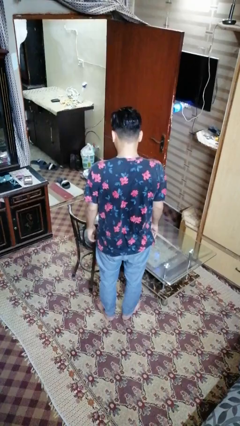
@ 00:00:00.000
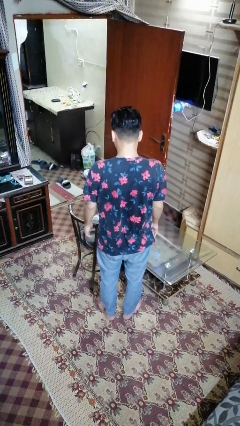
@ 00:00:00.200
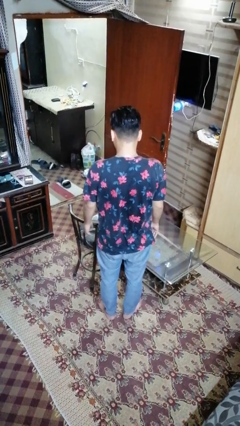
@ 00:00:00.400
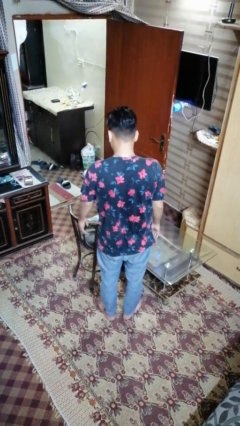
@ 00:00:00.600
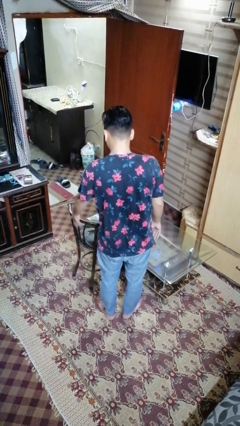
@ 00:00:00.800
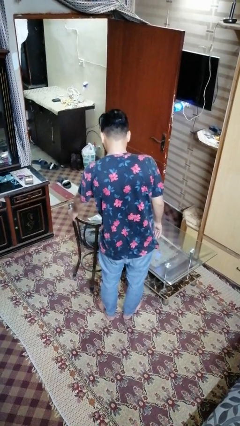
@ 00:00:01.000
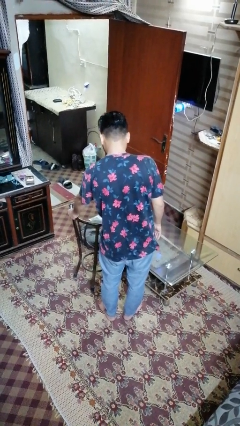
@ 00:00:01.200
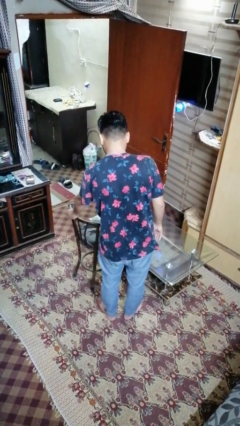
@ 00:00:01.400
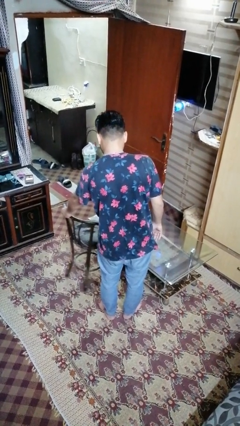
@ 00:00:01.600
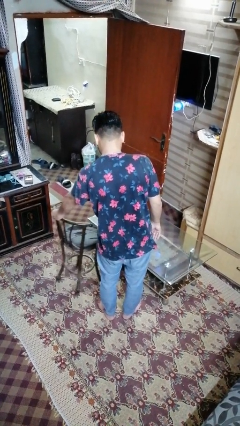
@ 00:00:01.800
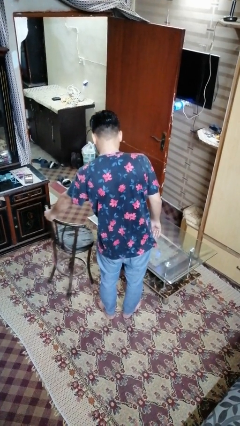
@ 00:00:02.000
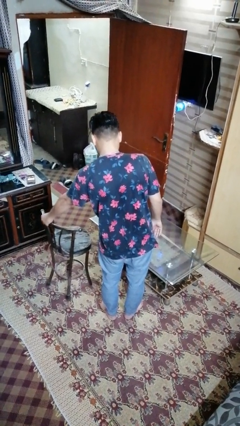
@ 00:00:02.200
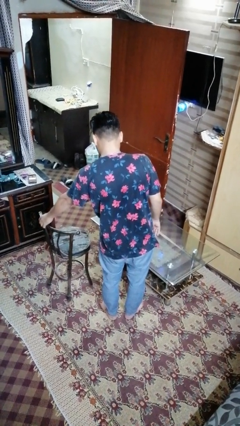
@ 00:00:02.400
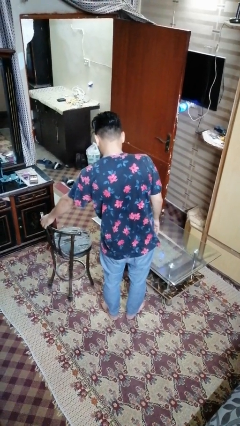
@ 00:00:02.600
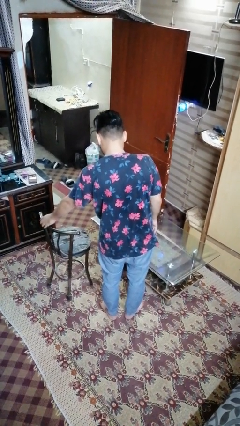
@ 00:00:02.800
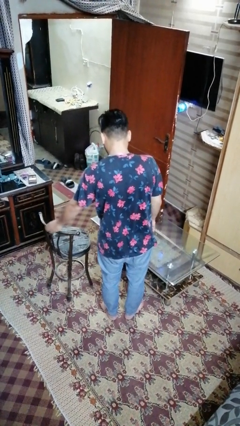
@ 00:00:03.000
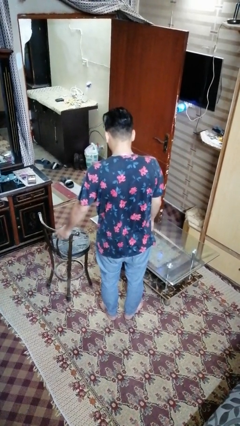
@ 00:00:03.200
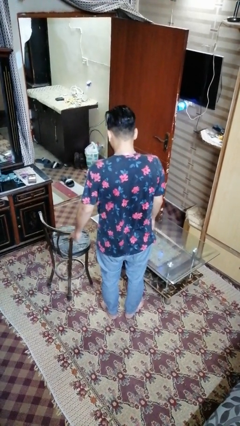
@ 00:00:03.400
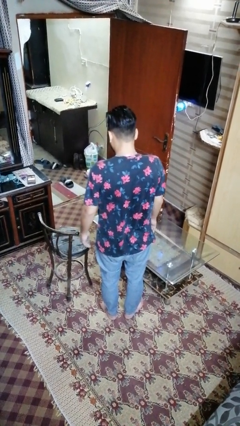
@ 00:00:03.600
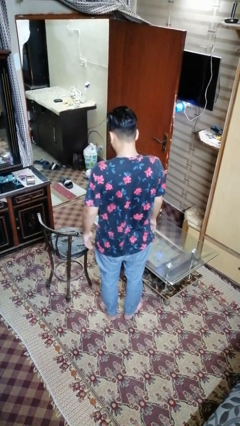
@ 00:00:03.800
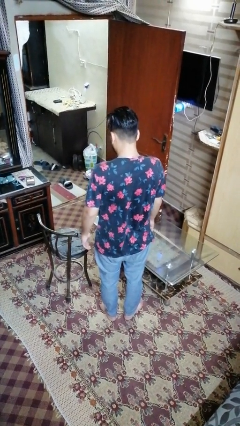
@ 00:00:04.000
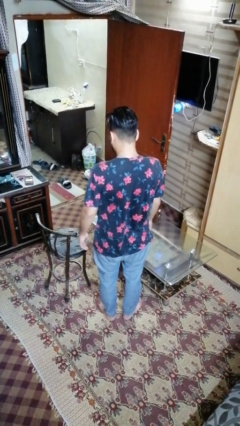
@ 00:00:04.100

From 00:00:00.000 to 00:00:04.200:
person pulls out chair

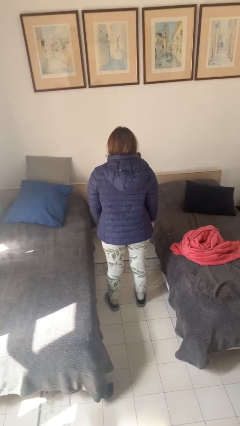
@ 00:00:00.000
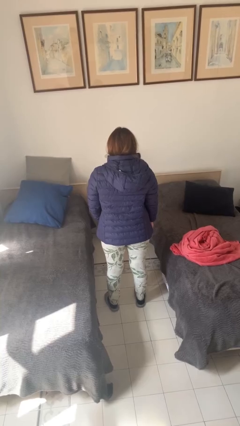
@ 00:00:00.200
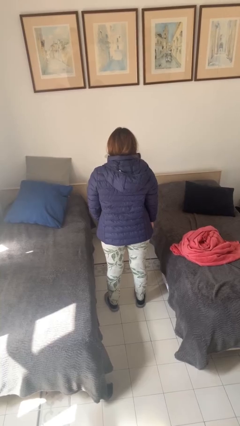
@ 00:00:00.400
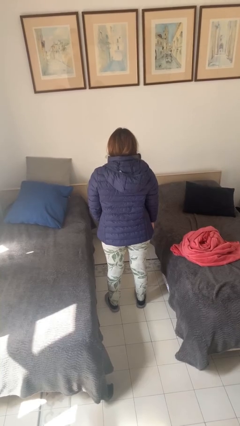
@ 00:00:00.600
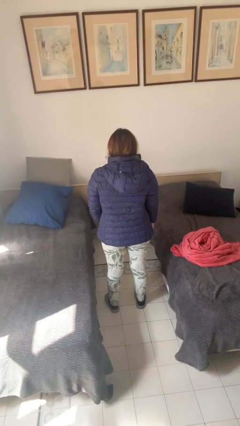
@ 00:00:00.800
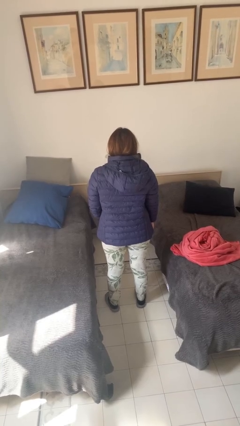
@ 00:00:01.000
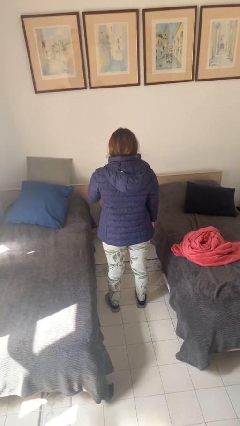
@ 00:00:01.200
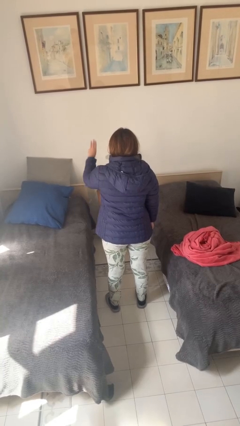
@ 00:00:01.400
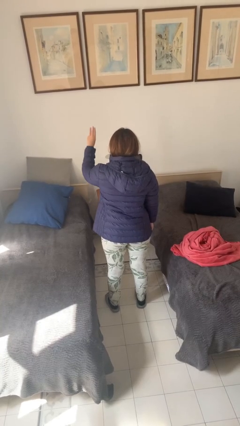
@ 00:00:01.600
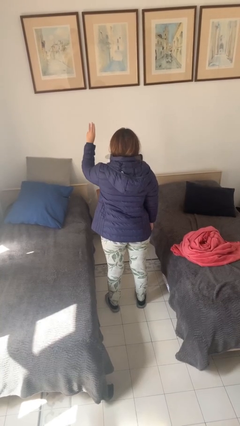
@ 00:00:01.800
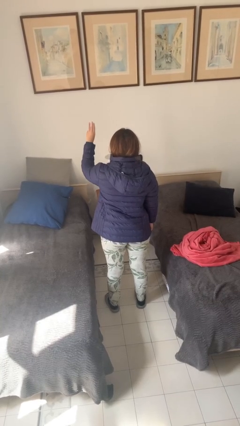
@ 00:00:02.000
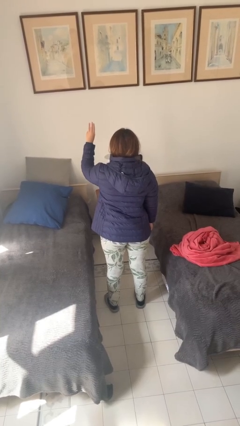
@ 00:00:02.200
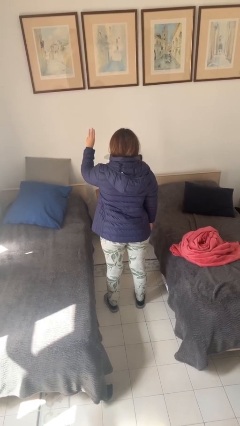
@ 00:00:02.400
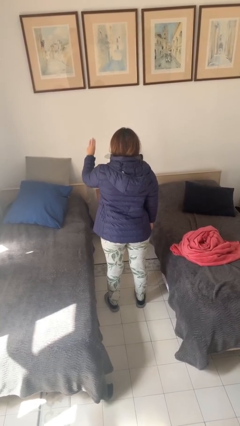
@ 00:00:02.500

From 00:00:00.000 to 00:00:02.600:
person gestures number three

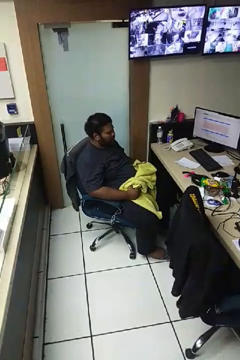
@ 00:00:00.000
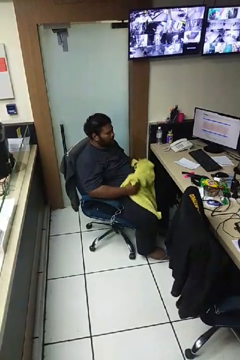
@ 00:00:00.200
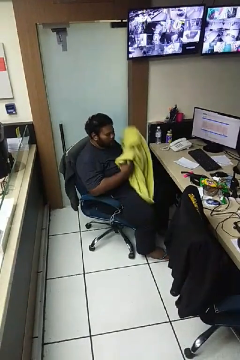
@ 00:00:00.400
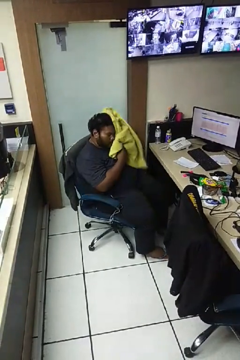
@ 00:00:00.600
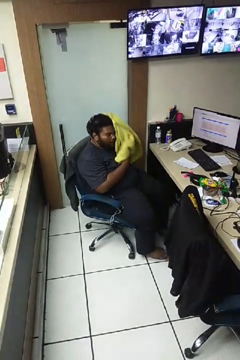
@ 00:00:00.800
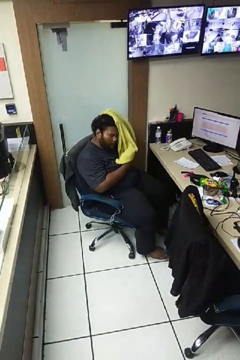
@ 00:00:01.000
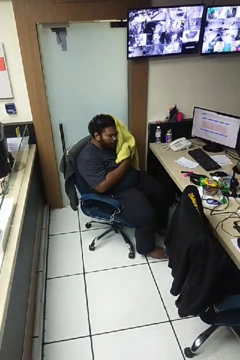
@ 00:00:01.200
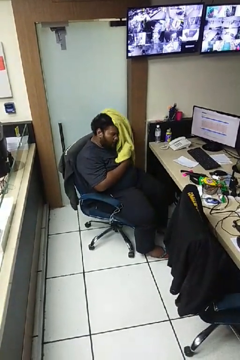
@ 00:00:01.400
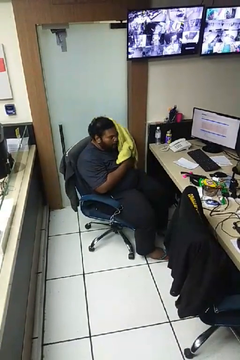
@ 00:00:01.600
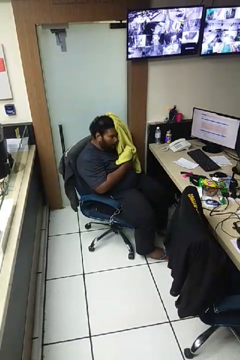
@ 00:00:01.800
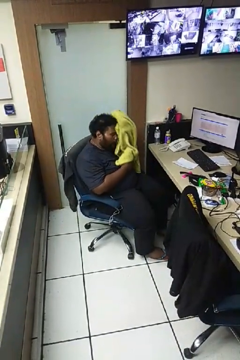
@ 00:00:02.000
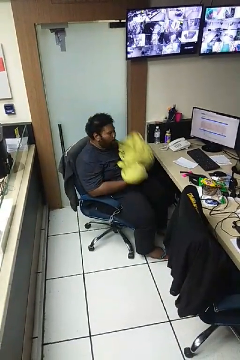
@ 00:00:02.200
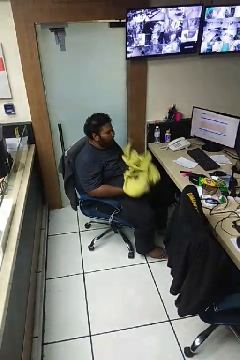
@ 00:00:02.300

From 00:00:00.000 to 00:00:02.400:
person dries hair with towel

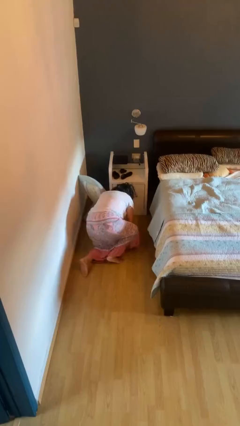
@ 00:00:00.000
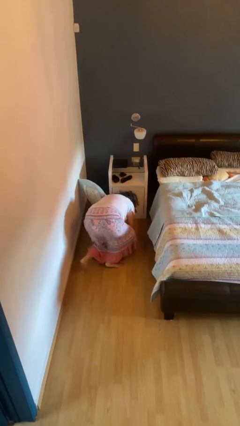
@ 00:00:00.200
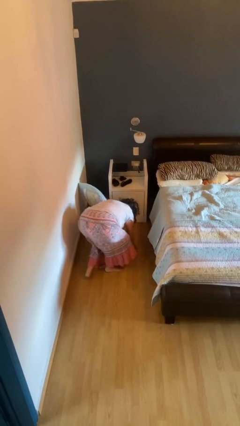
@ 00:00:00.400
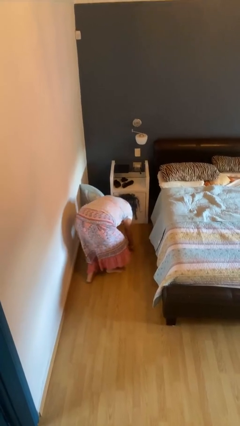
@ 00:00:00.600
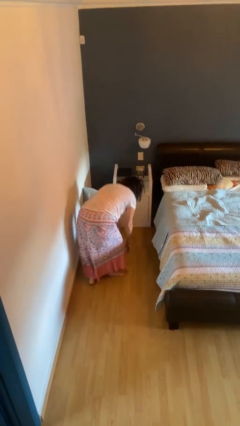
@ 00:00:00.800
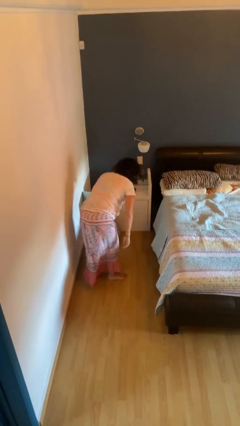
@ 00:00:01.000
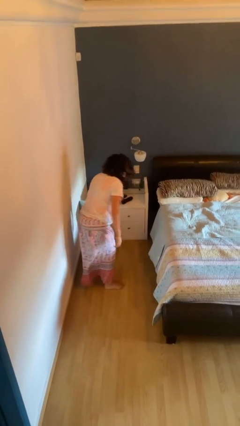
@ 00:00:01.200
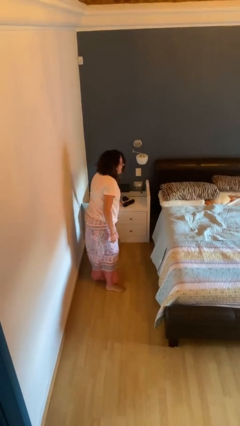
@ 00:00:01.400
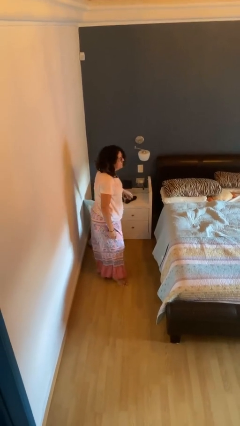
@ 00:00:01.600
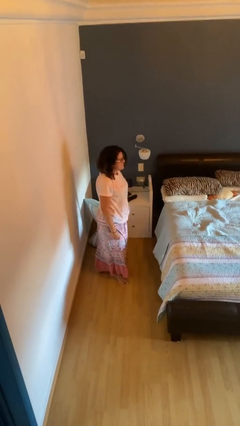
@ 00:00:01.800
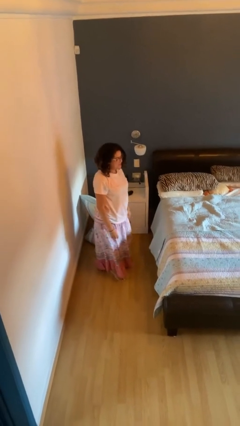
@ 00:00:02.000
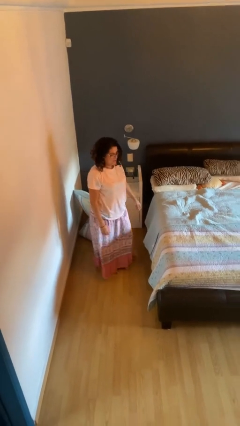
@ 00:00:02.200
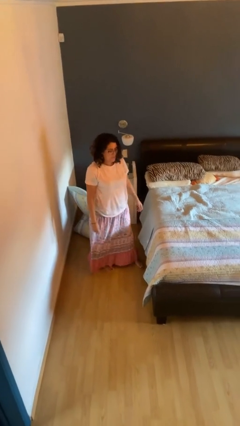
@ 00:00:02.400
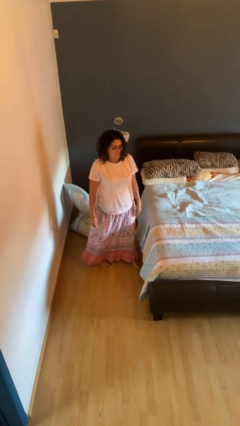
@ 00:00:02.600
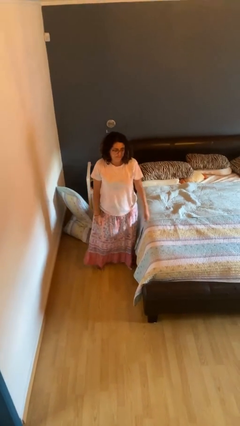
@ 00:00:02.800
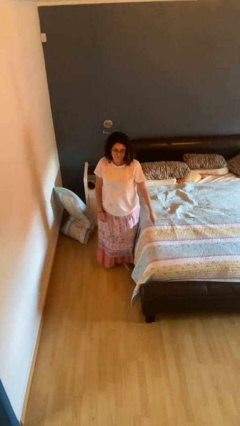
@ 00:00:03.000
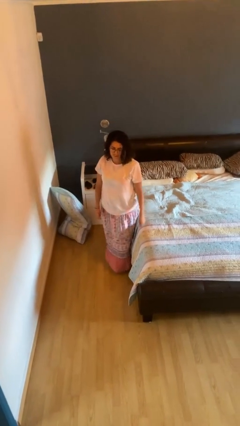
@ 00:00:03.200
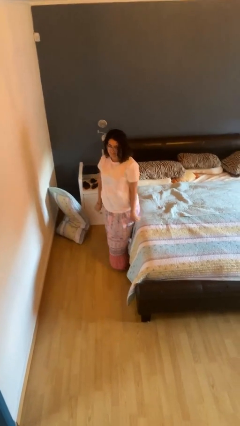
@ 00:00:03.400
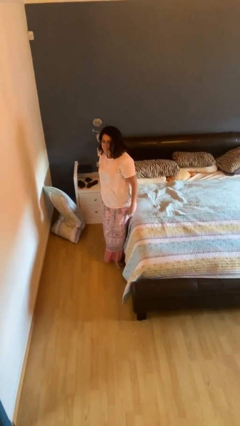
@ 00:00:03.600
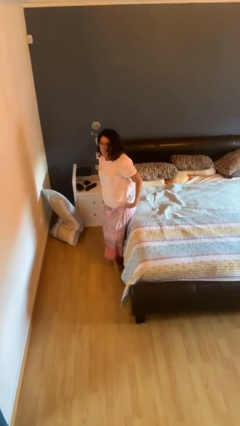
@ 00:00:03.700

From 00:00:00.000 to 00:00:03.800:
person stands up from floor

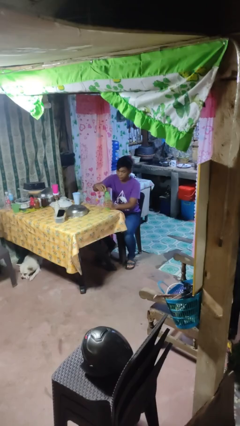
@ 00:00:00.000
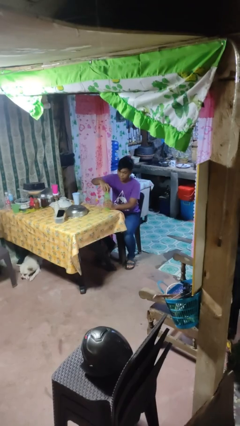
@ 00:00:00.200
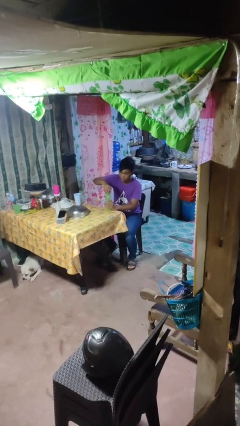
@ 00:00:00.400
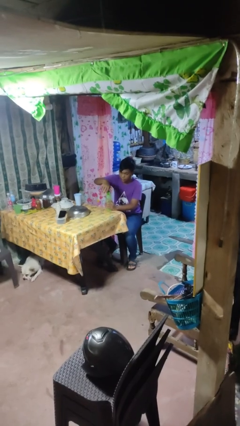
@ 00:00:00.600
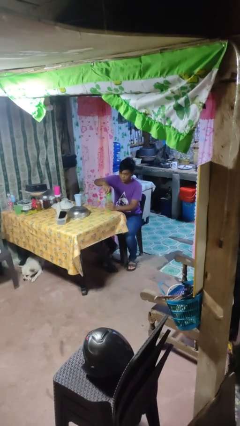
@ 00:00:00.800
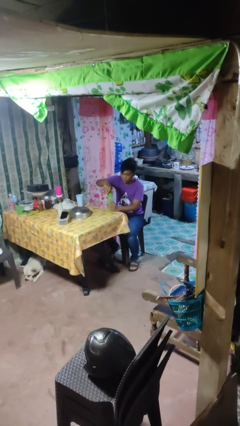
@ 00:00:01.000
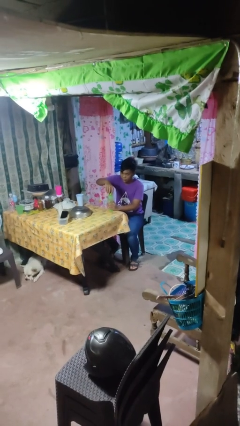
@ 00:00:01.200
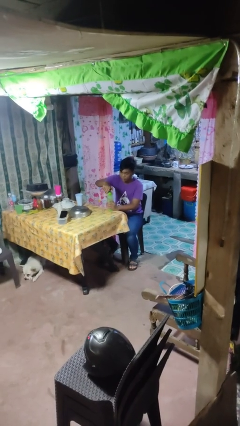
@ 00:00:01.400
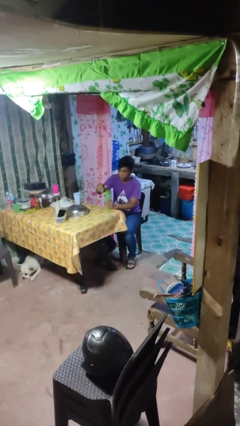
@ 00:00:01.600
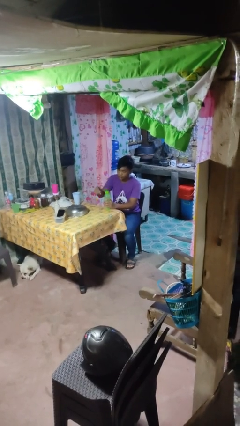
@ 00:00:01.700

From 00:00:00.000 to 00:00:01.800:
person screws lid to bottle

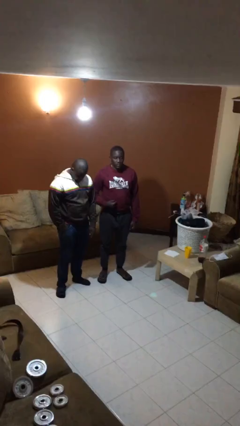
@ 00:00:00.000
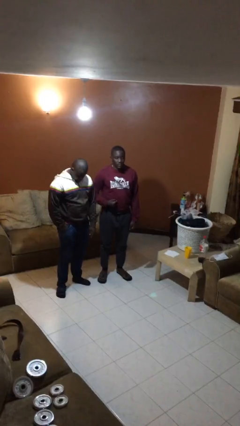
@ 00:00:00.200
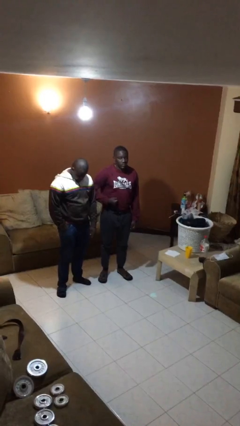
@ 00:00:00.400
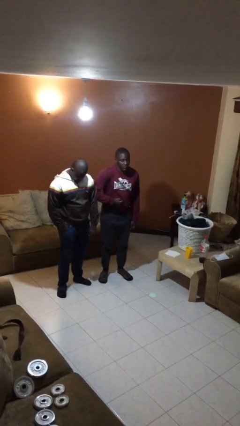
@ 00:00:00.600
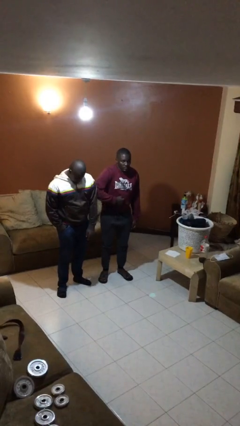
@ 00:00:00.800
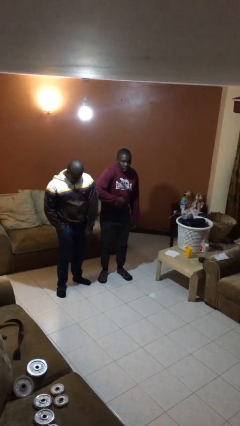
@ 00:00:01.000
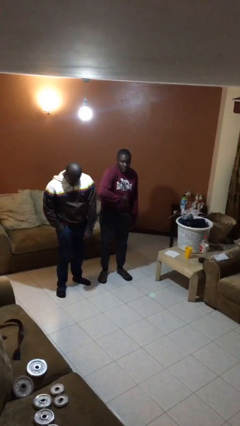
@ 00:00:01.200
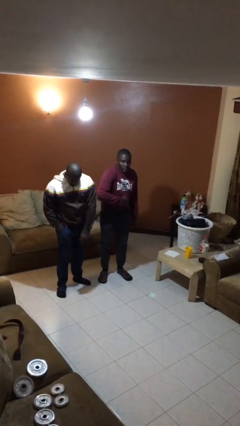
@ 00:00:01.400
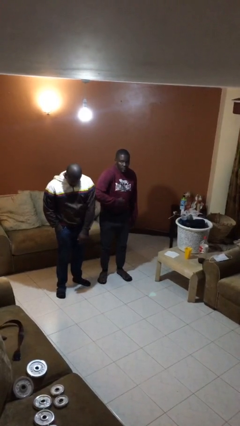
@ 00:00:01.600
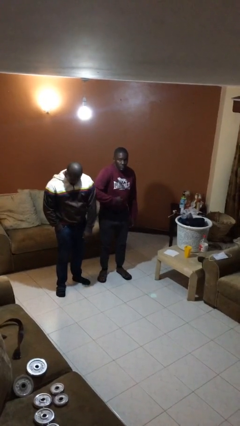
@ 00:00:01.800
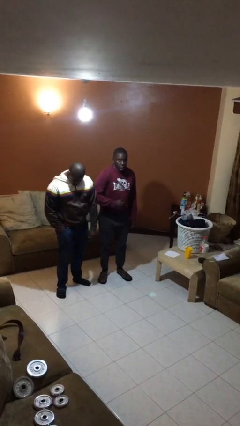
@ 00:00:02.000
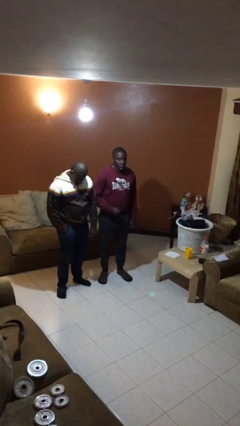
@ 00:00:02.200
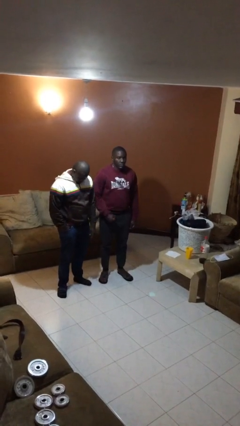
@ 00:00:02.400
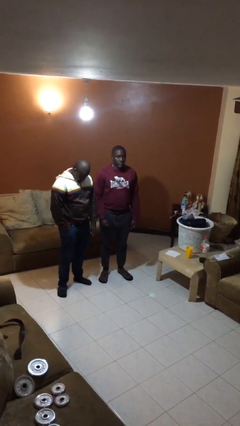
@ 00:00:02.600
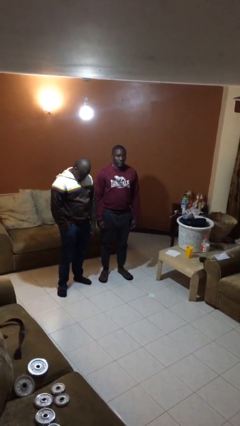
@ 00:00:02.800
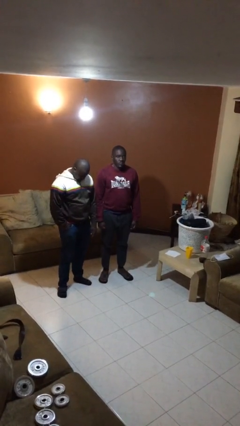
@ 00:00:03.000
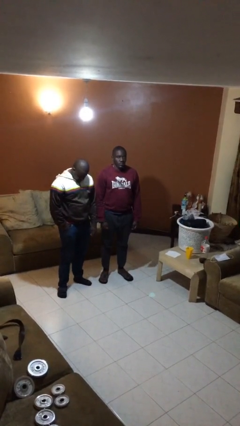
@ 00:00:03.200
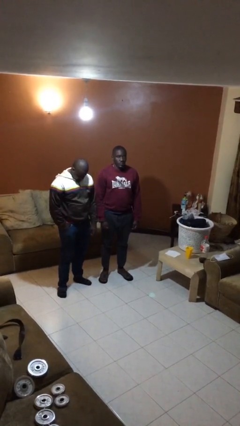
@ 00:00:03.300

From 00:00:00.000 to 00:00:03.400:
person nudges person with elbow
